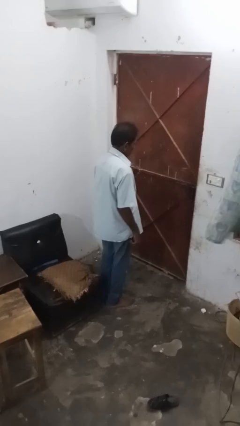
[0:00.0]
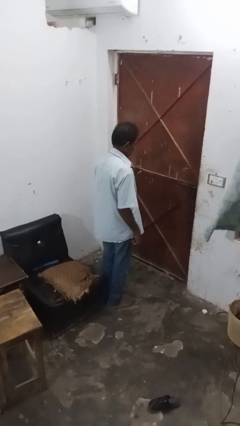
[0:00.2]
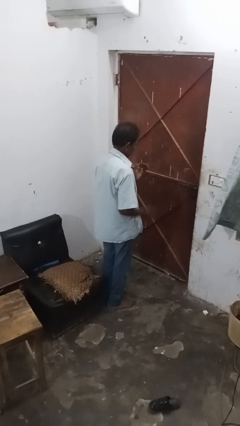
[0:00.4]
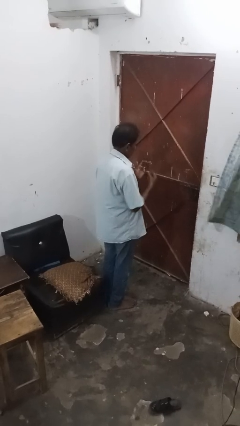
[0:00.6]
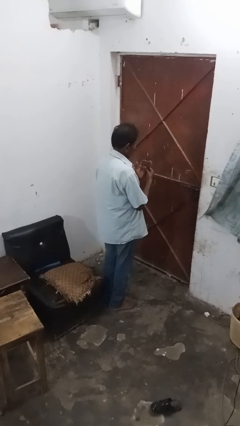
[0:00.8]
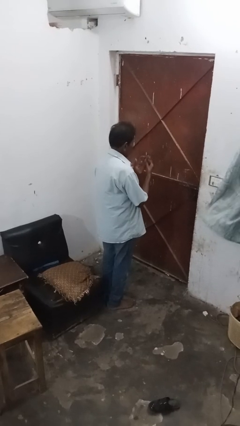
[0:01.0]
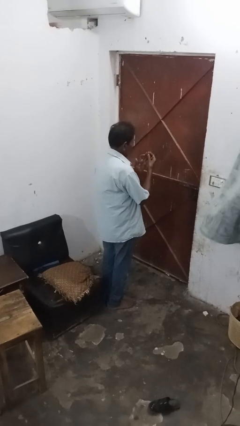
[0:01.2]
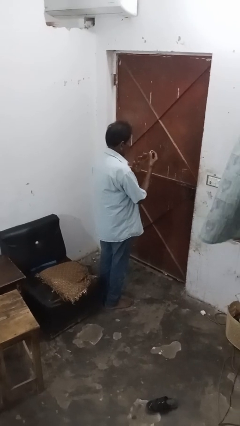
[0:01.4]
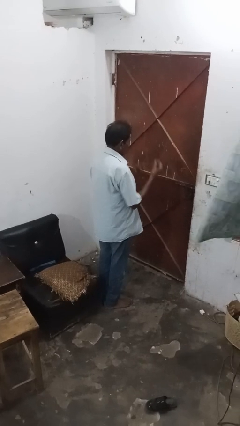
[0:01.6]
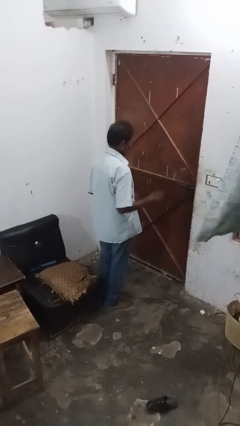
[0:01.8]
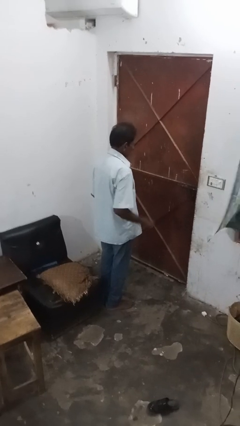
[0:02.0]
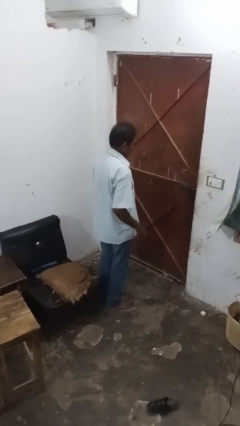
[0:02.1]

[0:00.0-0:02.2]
person takes off ring

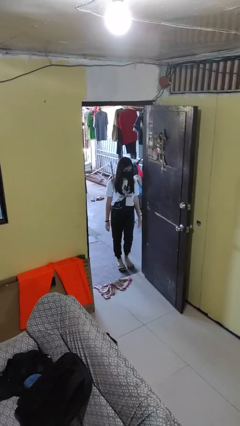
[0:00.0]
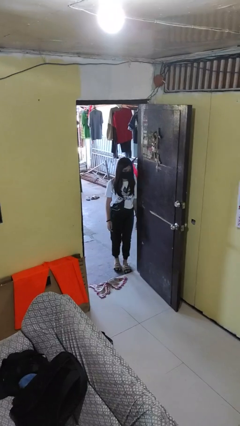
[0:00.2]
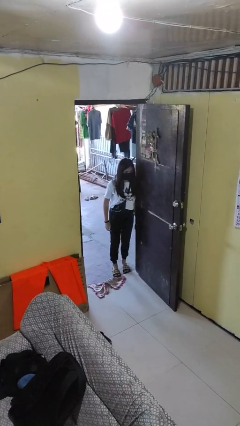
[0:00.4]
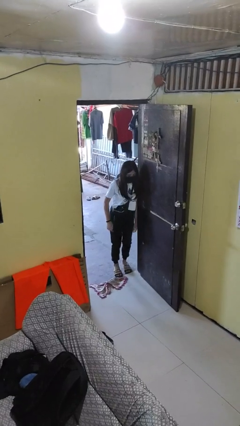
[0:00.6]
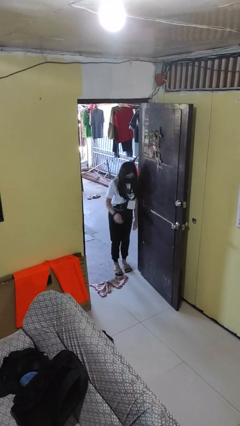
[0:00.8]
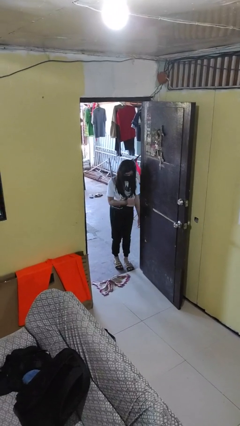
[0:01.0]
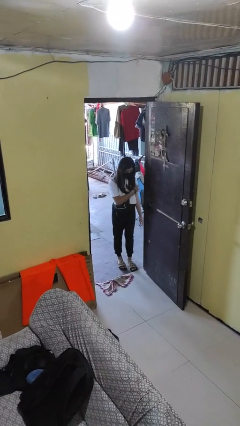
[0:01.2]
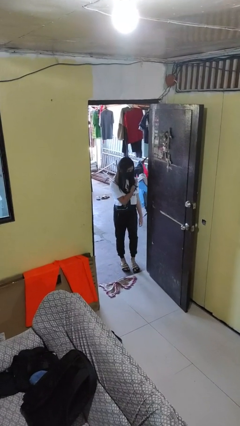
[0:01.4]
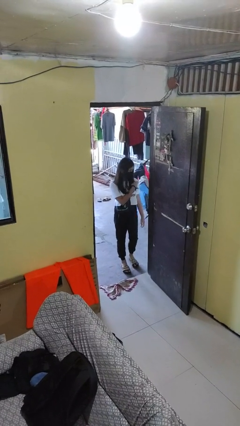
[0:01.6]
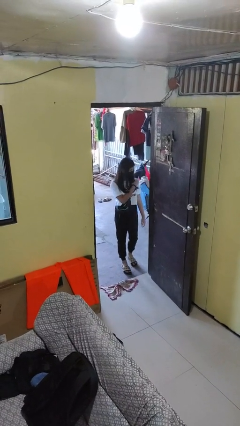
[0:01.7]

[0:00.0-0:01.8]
person bumps into wall

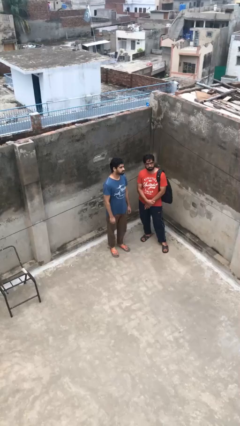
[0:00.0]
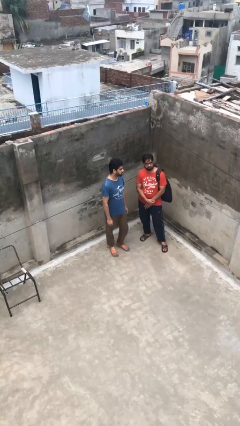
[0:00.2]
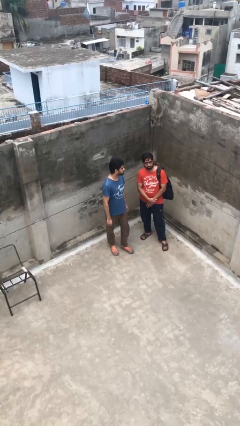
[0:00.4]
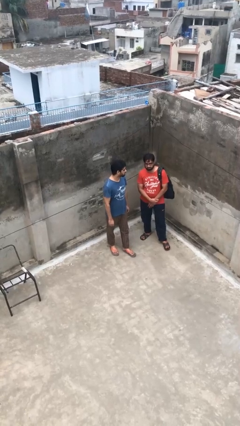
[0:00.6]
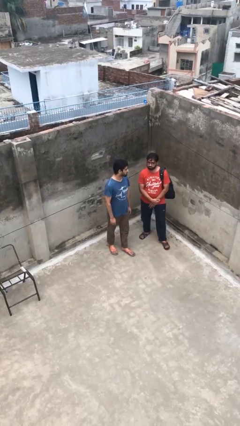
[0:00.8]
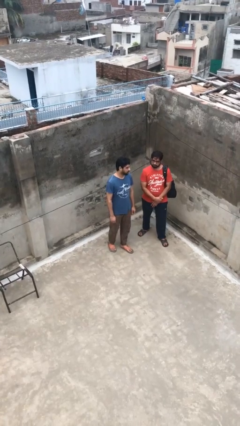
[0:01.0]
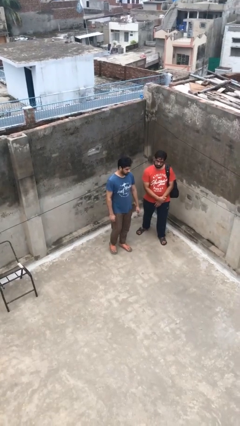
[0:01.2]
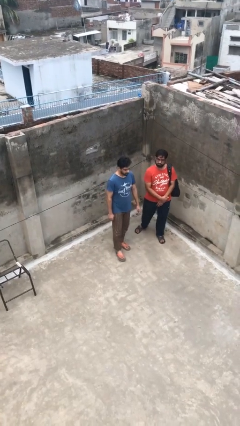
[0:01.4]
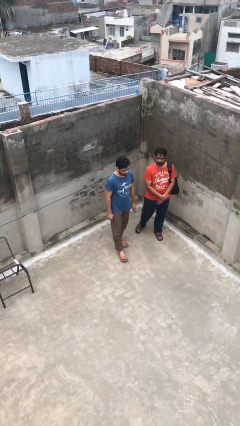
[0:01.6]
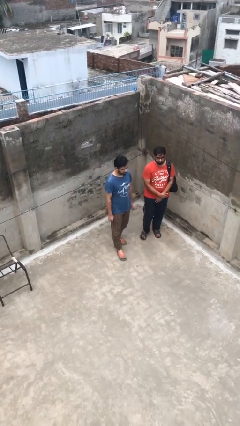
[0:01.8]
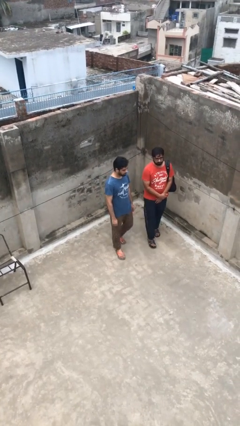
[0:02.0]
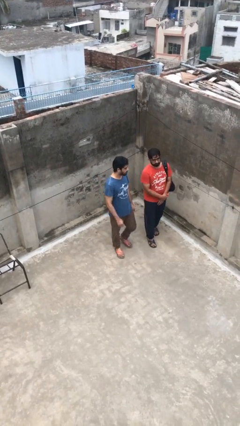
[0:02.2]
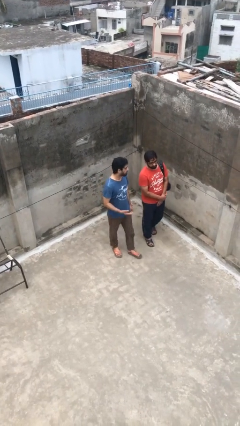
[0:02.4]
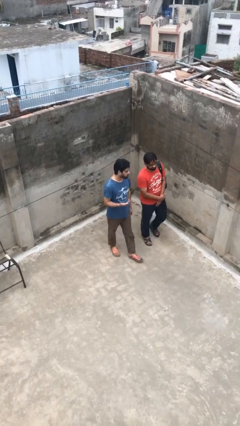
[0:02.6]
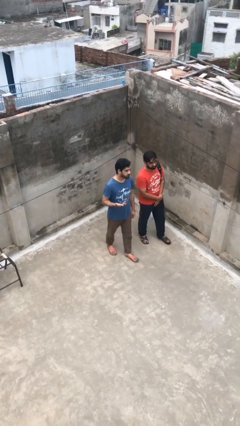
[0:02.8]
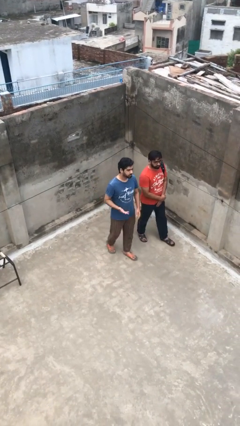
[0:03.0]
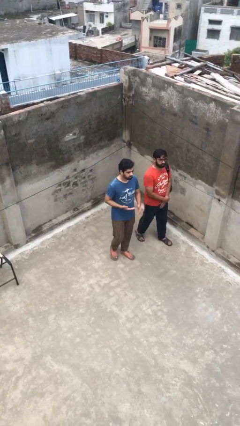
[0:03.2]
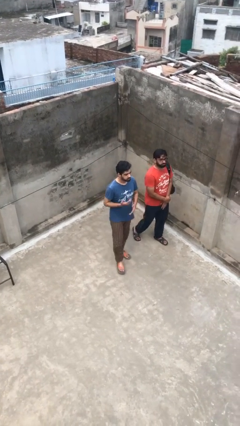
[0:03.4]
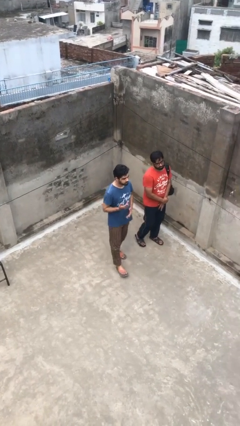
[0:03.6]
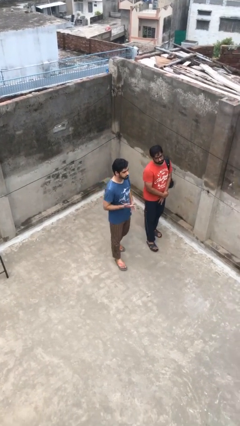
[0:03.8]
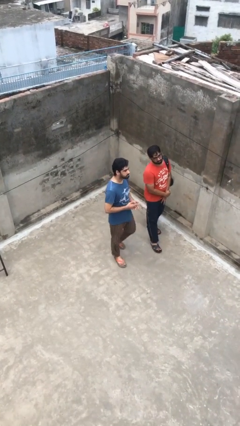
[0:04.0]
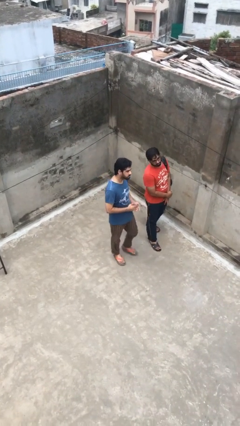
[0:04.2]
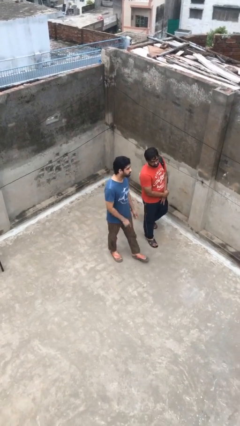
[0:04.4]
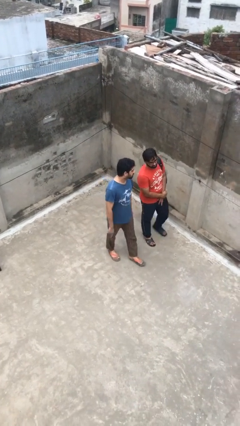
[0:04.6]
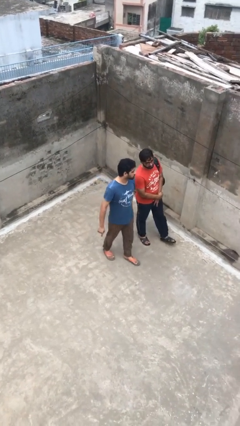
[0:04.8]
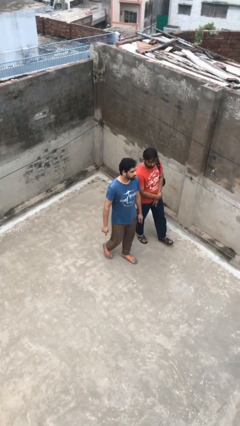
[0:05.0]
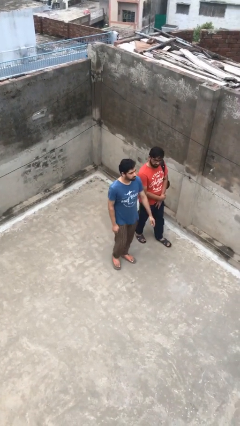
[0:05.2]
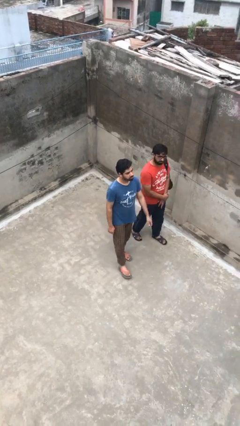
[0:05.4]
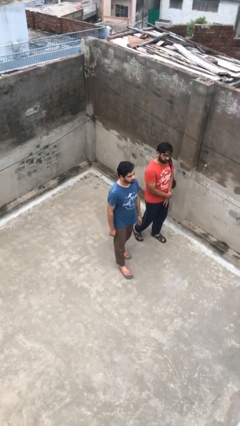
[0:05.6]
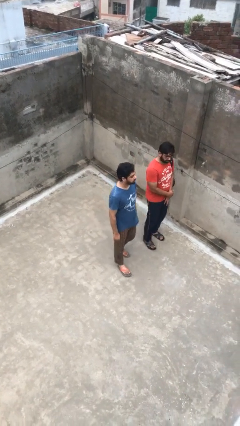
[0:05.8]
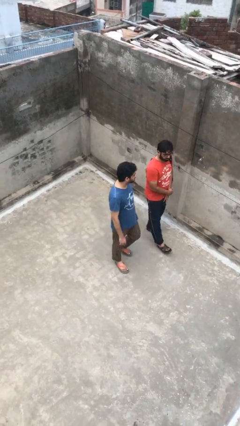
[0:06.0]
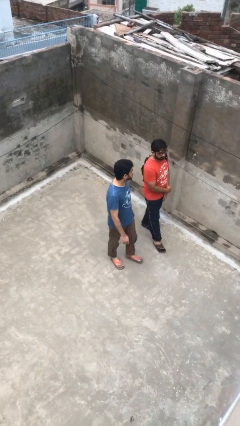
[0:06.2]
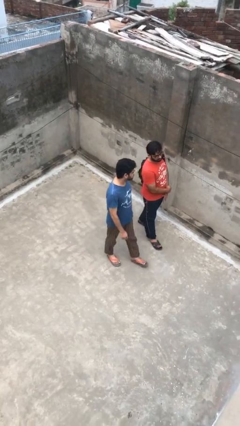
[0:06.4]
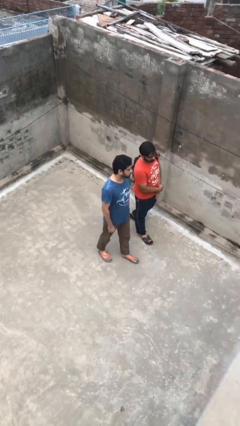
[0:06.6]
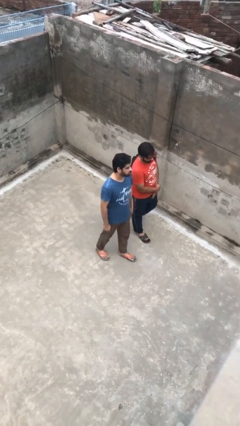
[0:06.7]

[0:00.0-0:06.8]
person talks to person

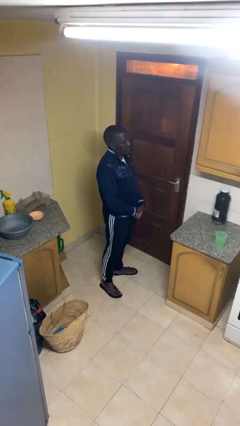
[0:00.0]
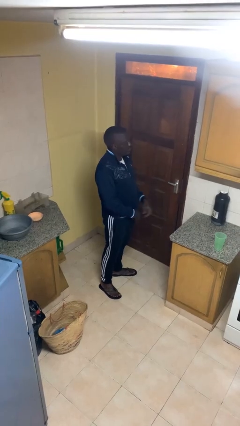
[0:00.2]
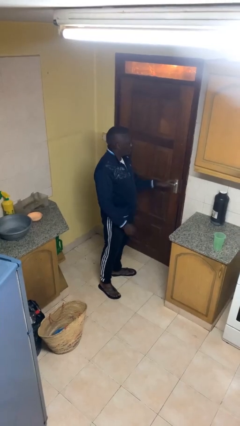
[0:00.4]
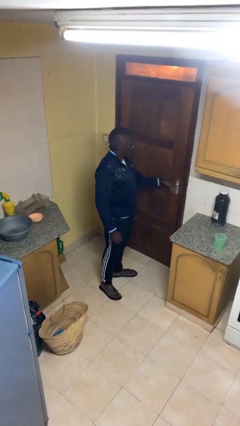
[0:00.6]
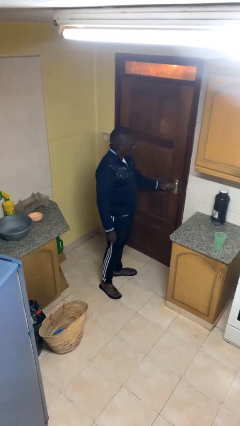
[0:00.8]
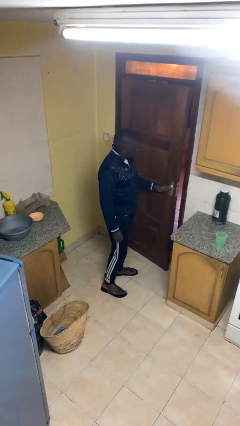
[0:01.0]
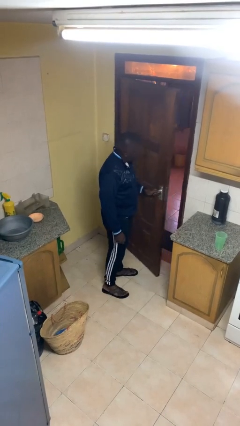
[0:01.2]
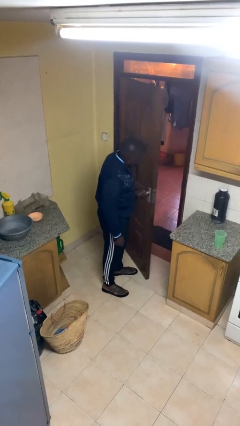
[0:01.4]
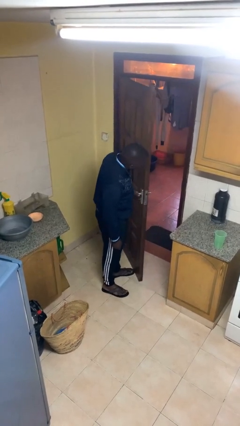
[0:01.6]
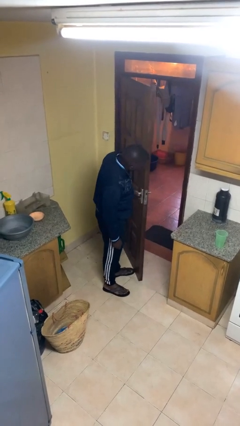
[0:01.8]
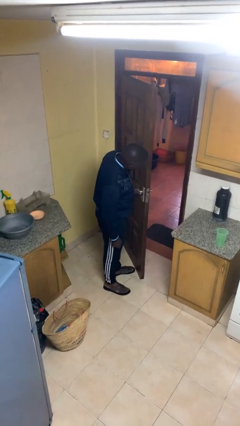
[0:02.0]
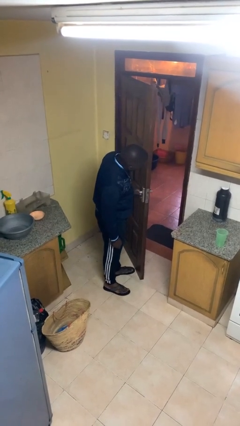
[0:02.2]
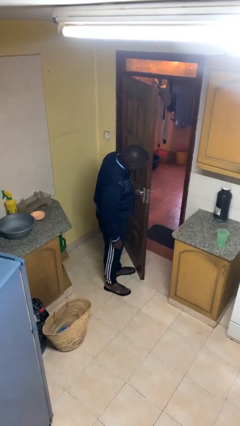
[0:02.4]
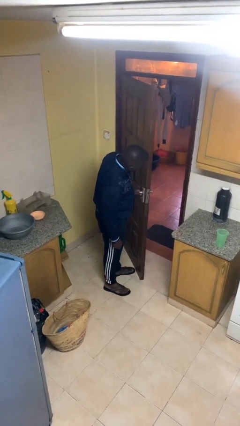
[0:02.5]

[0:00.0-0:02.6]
person opens facility door

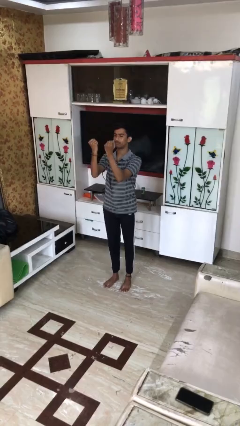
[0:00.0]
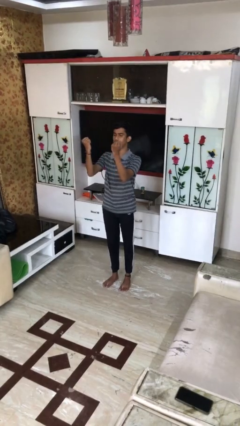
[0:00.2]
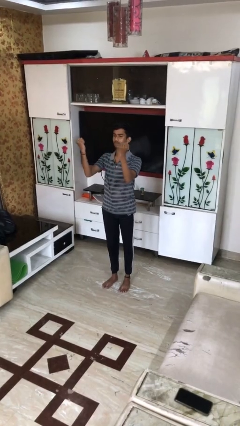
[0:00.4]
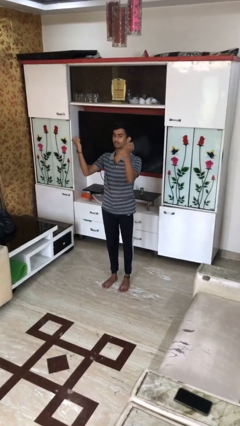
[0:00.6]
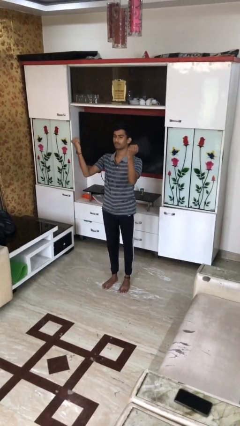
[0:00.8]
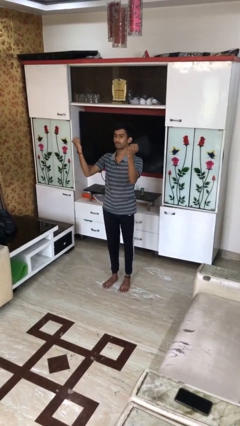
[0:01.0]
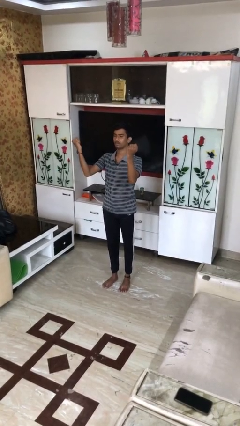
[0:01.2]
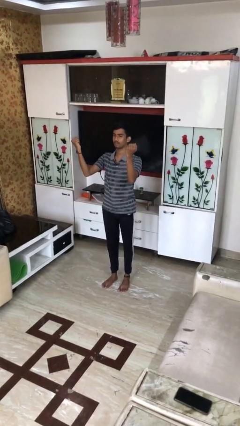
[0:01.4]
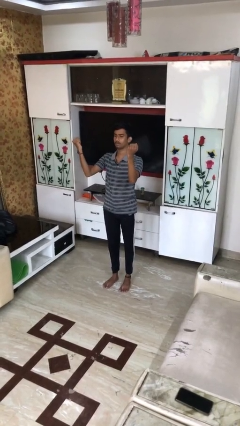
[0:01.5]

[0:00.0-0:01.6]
person gestures zoom in

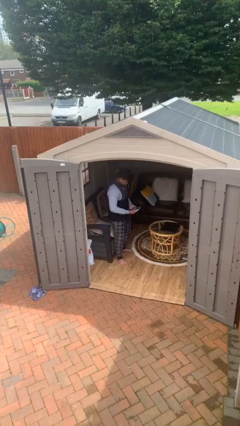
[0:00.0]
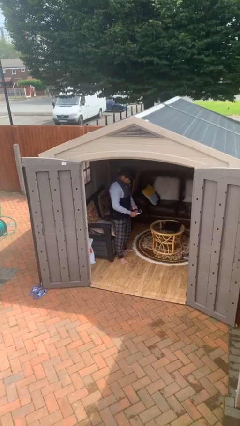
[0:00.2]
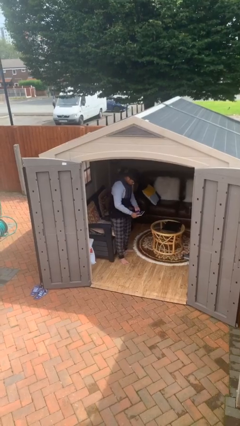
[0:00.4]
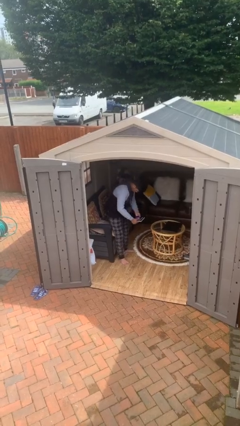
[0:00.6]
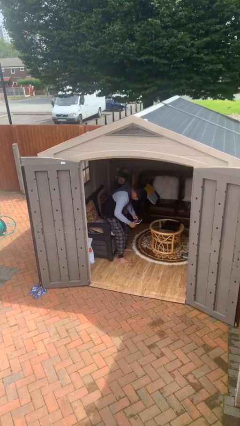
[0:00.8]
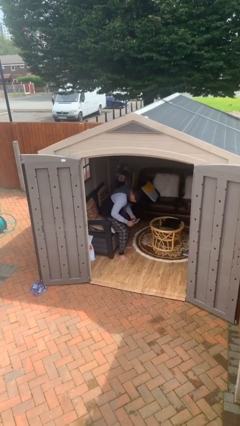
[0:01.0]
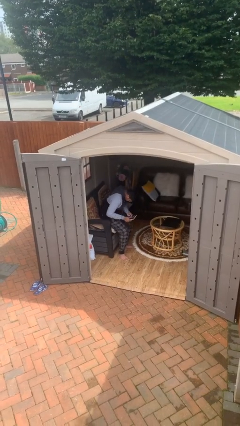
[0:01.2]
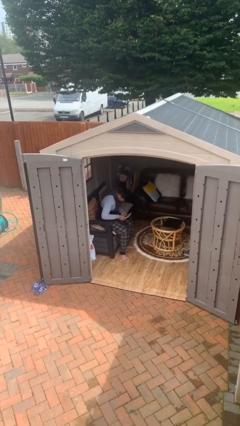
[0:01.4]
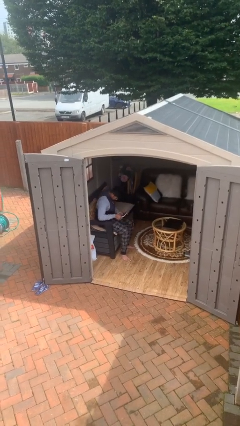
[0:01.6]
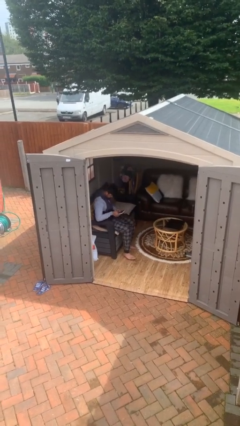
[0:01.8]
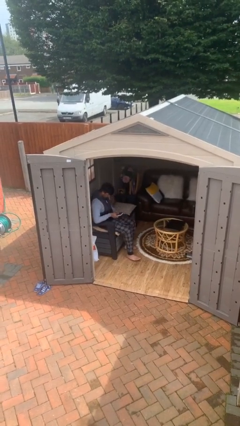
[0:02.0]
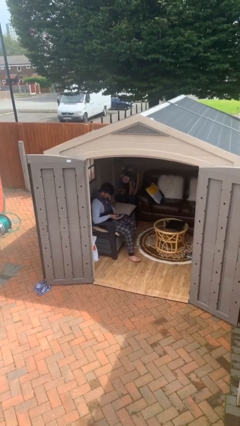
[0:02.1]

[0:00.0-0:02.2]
person sits down
